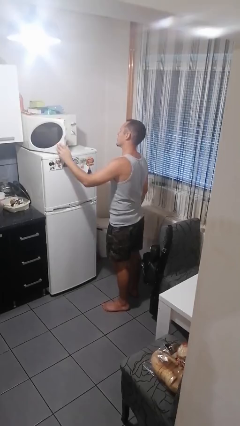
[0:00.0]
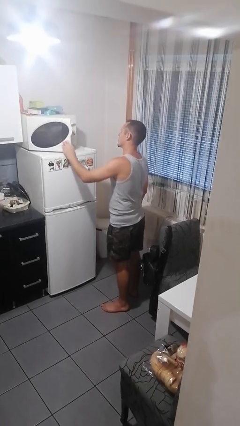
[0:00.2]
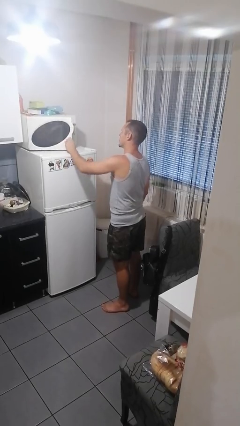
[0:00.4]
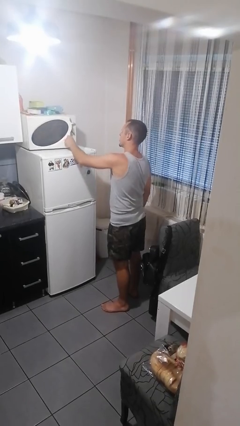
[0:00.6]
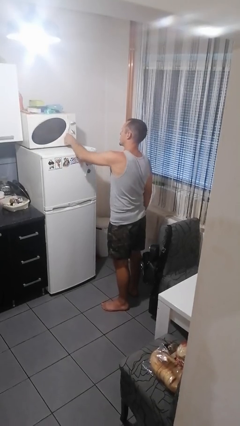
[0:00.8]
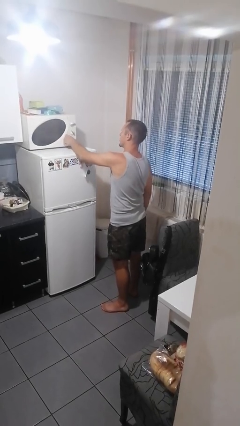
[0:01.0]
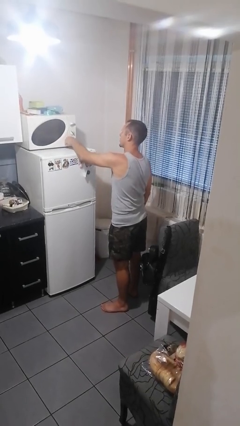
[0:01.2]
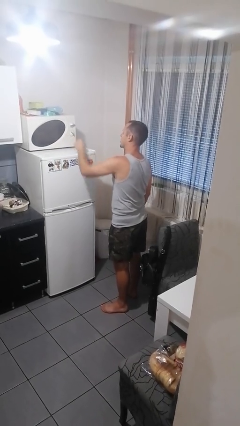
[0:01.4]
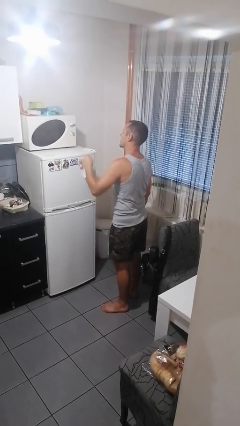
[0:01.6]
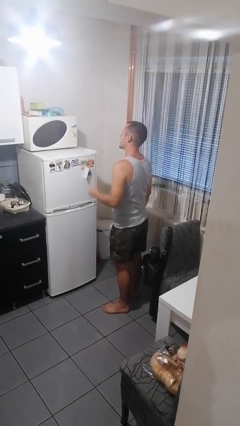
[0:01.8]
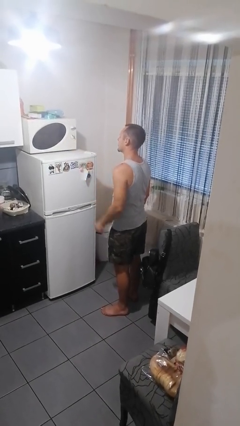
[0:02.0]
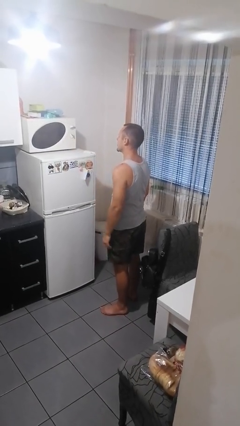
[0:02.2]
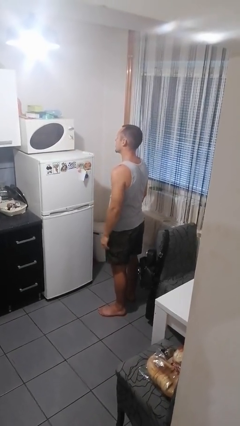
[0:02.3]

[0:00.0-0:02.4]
person closes microwave

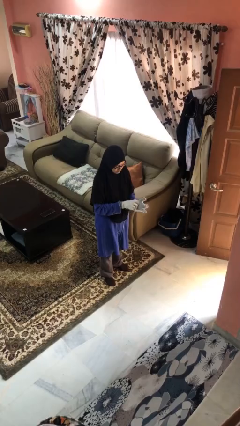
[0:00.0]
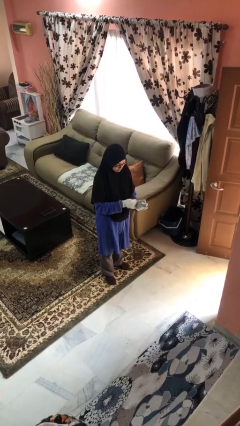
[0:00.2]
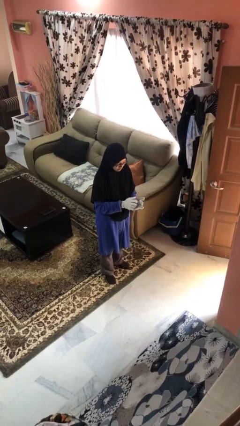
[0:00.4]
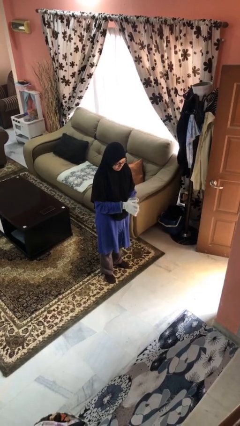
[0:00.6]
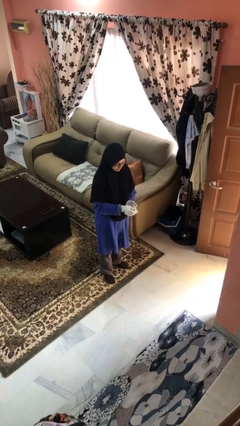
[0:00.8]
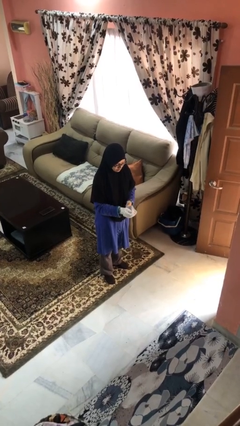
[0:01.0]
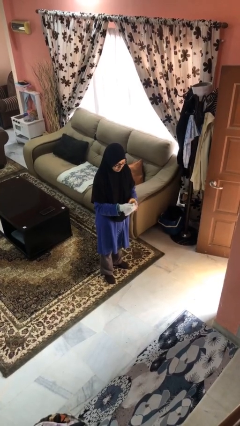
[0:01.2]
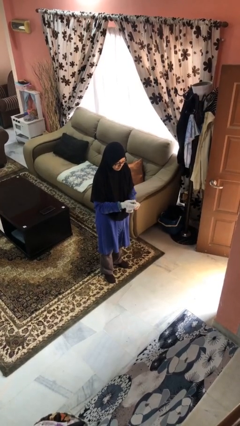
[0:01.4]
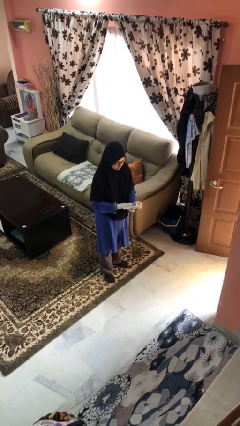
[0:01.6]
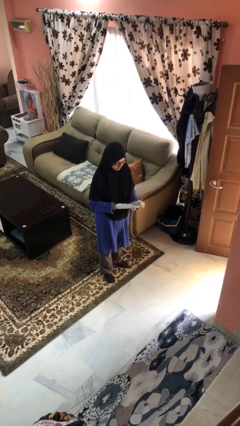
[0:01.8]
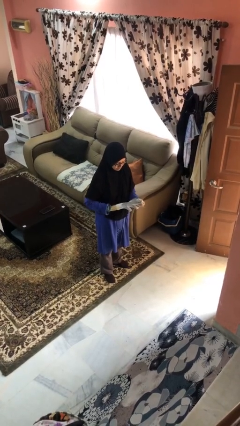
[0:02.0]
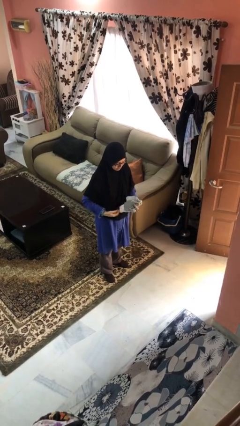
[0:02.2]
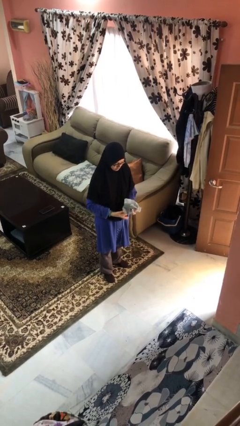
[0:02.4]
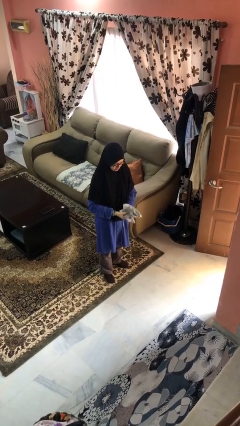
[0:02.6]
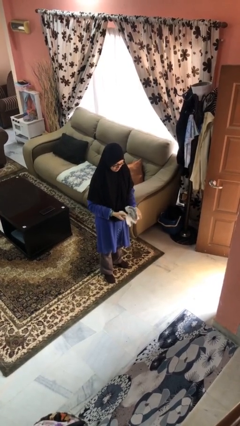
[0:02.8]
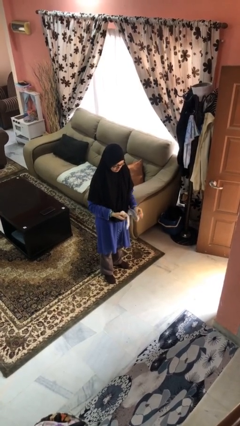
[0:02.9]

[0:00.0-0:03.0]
person takes off gloves

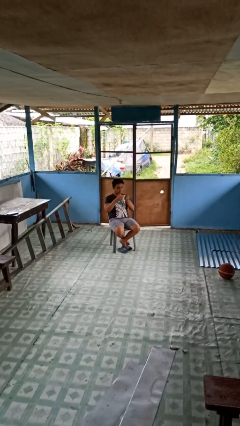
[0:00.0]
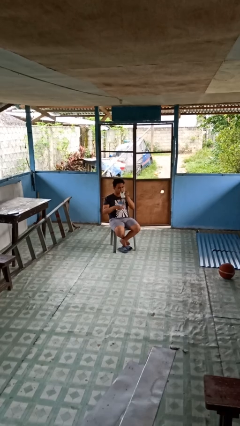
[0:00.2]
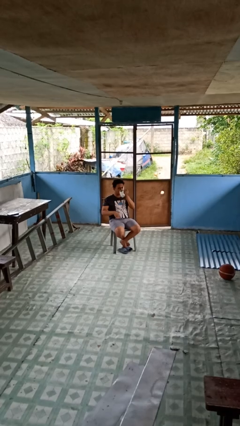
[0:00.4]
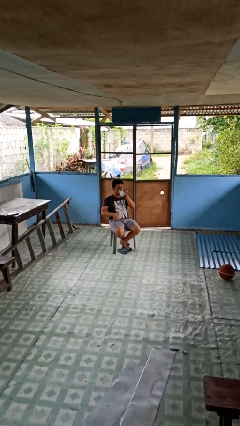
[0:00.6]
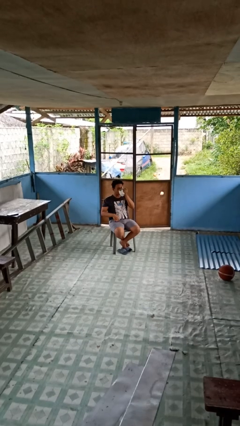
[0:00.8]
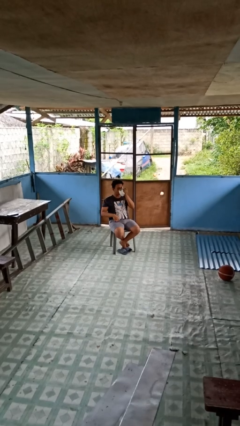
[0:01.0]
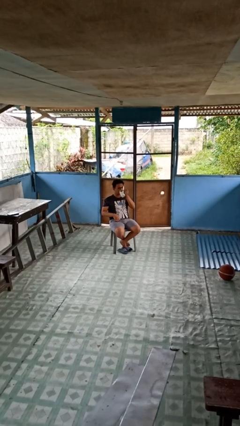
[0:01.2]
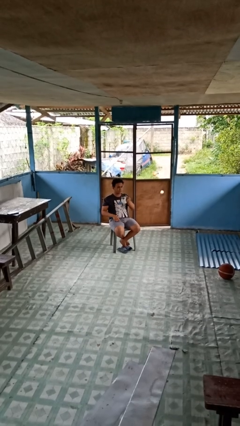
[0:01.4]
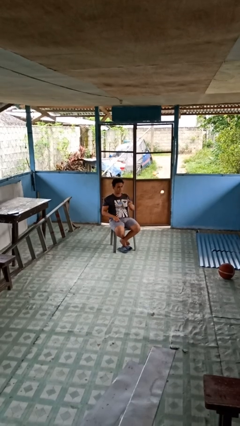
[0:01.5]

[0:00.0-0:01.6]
person drinks from mug

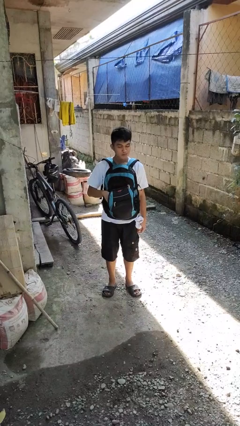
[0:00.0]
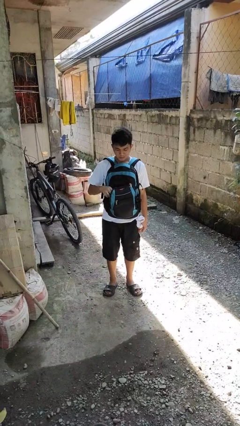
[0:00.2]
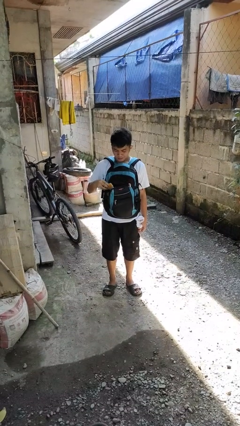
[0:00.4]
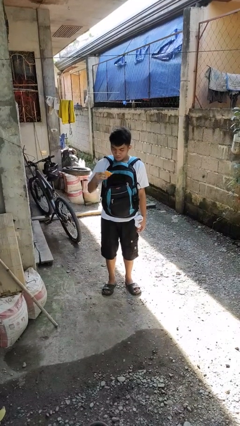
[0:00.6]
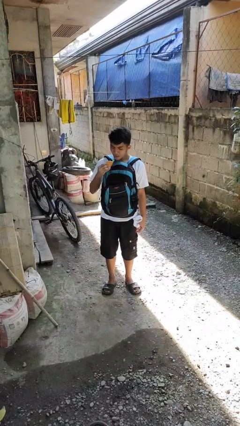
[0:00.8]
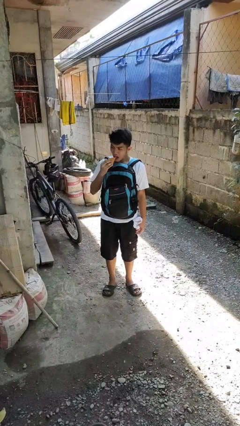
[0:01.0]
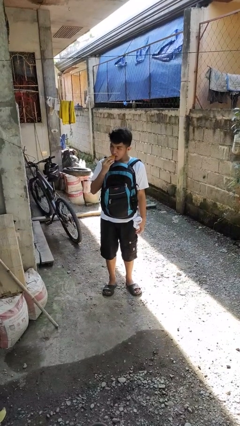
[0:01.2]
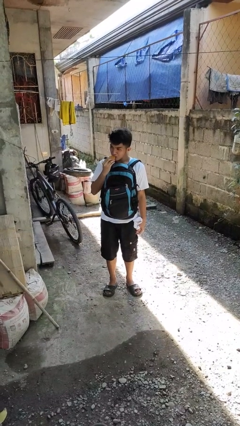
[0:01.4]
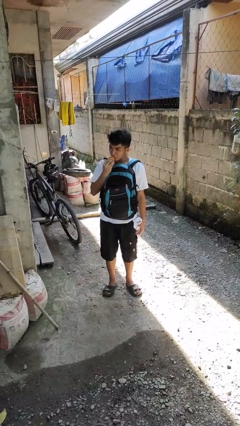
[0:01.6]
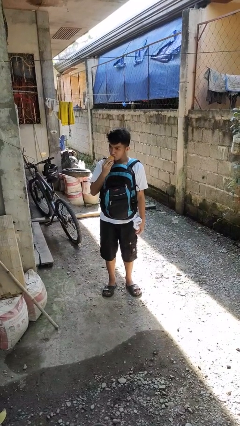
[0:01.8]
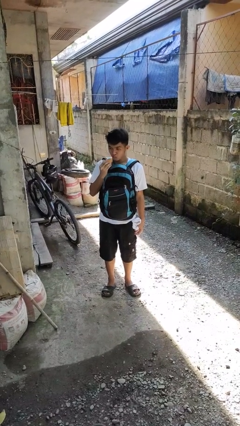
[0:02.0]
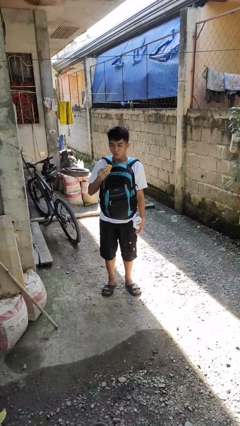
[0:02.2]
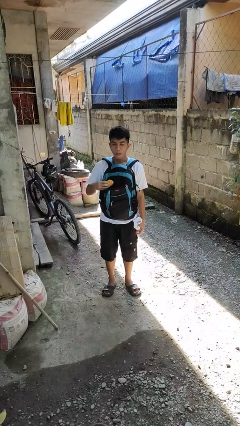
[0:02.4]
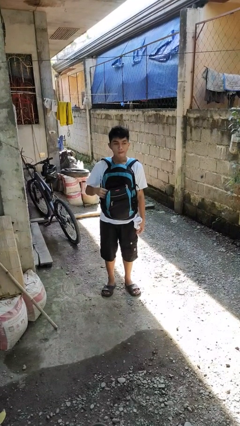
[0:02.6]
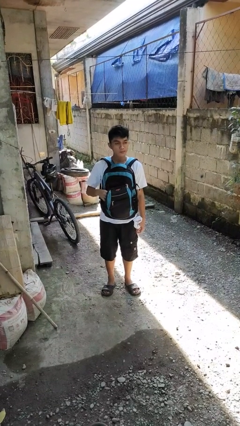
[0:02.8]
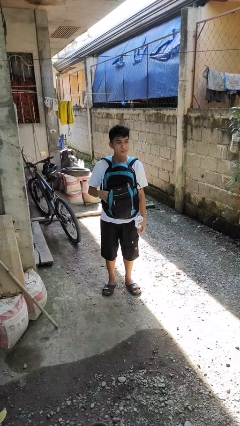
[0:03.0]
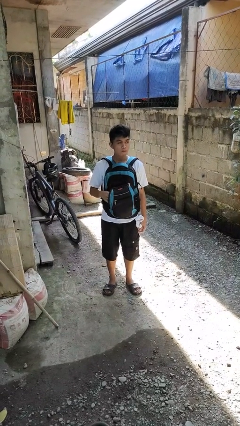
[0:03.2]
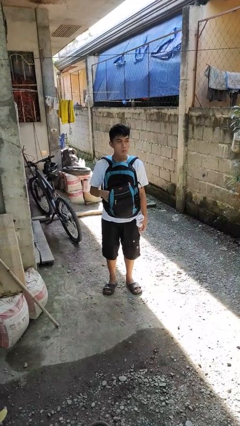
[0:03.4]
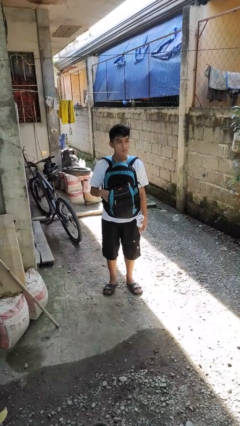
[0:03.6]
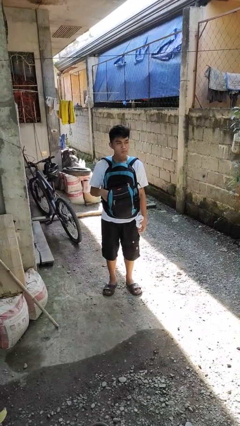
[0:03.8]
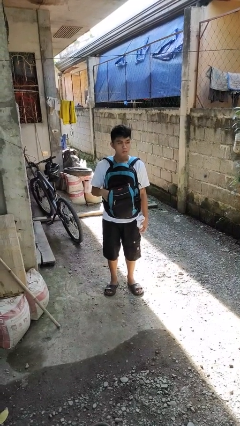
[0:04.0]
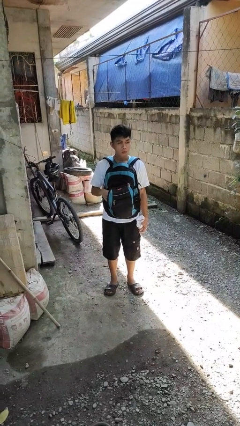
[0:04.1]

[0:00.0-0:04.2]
person eats snack from bag

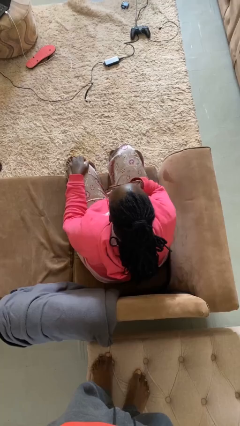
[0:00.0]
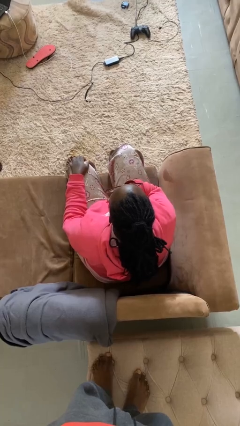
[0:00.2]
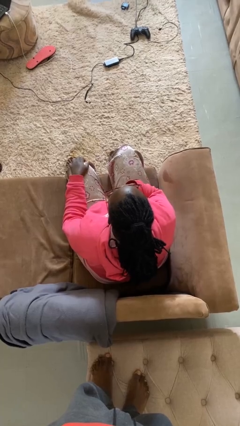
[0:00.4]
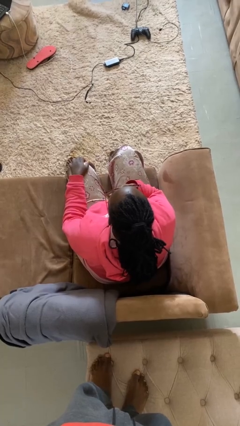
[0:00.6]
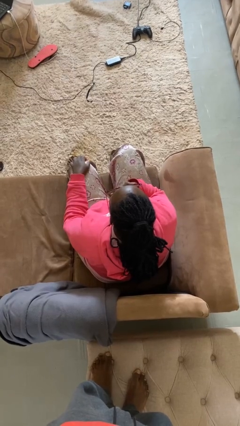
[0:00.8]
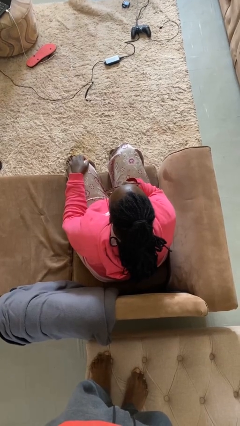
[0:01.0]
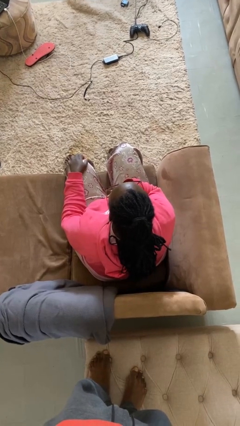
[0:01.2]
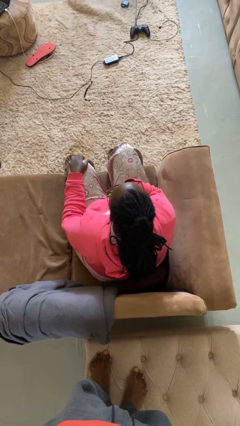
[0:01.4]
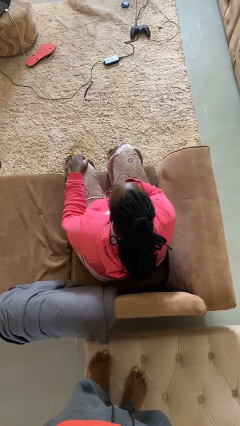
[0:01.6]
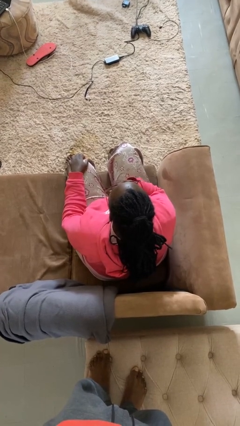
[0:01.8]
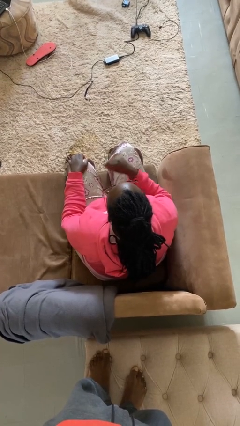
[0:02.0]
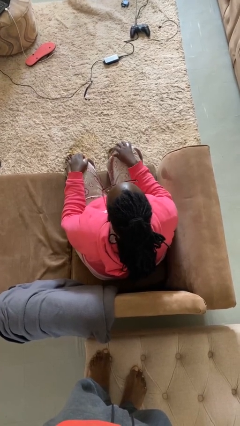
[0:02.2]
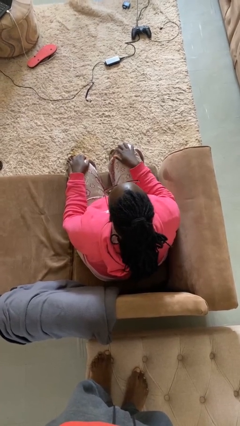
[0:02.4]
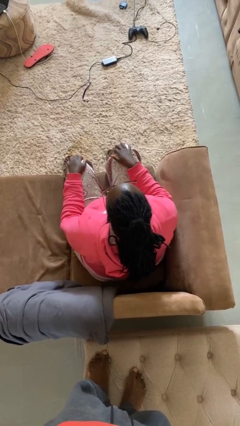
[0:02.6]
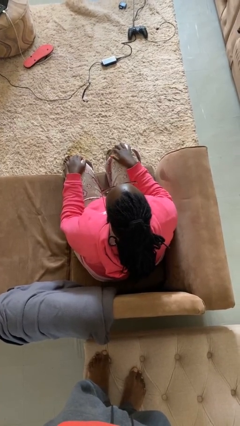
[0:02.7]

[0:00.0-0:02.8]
person strokes chin

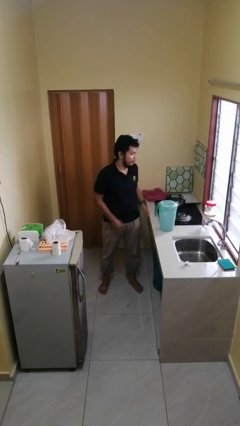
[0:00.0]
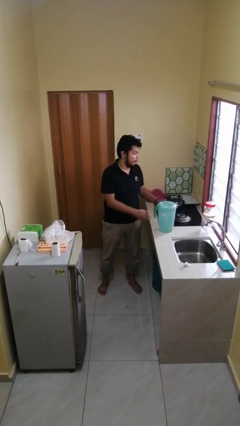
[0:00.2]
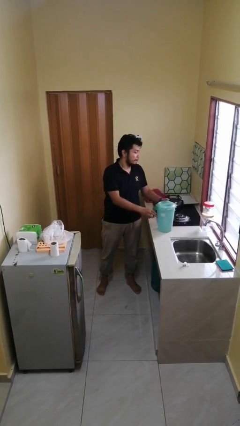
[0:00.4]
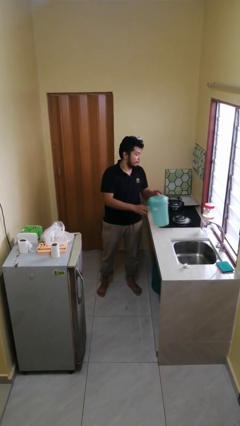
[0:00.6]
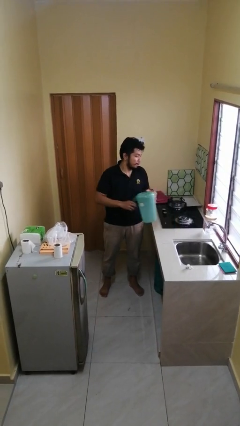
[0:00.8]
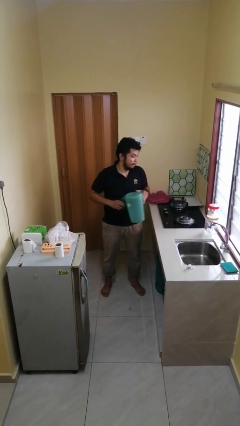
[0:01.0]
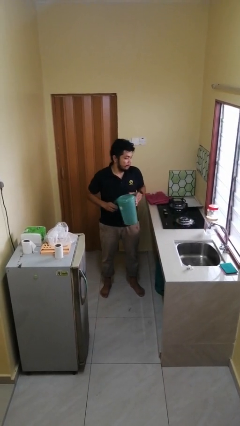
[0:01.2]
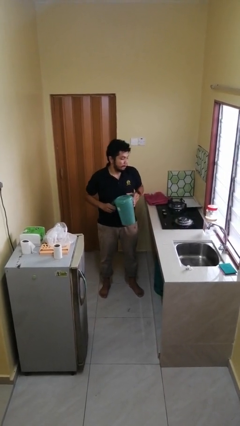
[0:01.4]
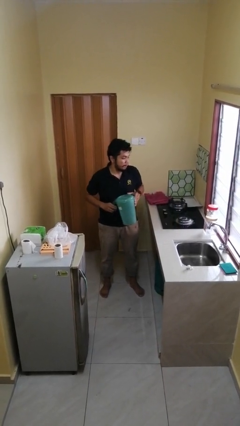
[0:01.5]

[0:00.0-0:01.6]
person picks up object from countertop

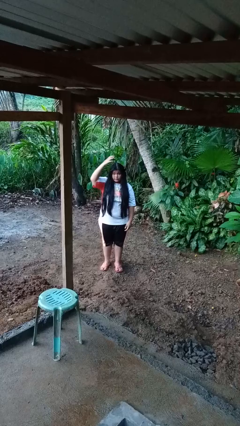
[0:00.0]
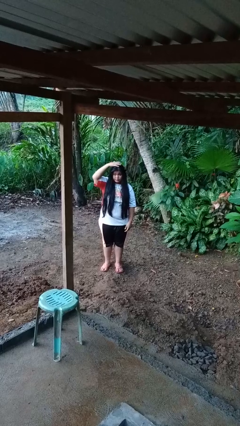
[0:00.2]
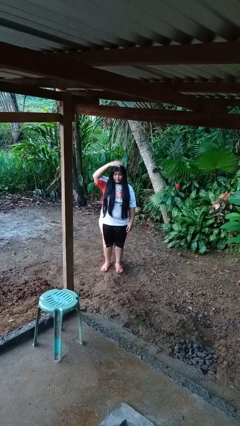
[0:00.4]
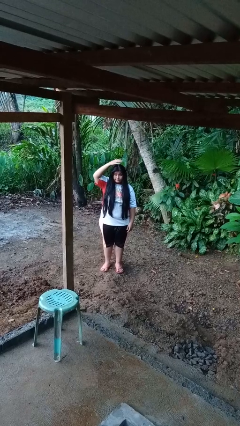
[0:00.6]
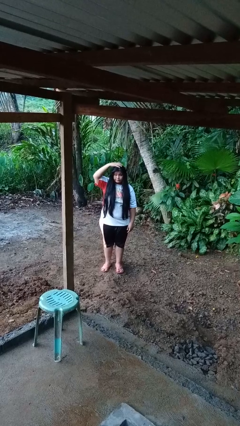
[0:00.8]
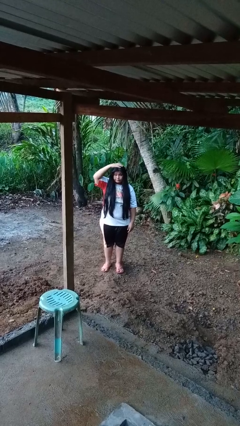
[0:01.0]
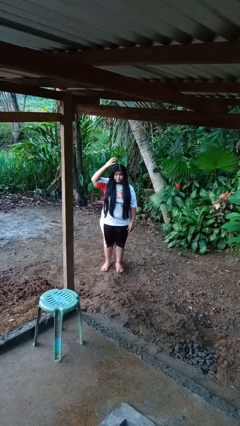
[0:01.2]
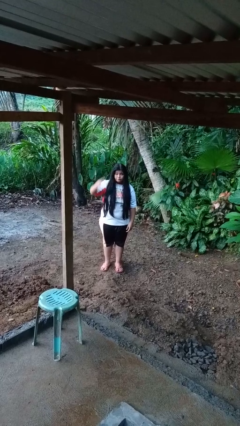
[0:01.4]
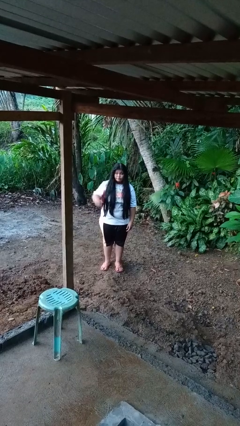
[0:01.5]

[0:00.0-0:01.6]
person pats head

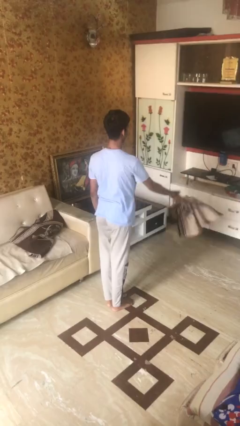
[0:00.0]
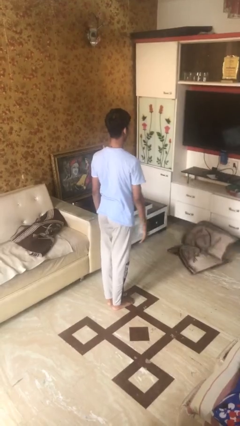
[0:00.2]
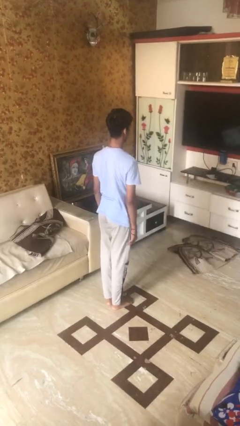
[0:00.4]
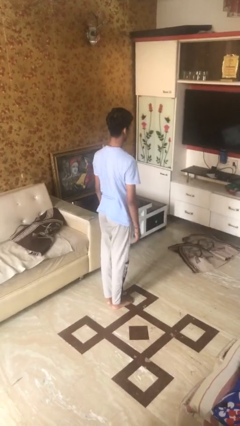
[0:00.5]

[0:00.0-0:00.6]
person throws object to ground
